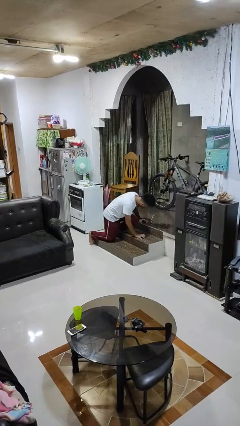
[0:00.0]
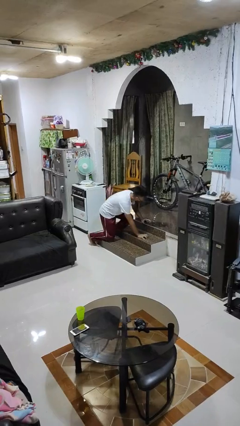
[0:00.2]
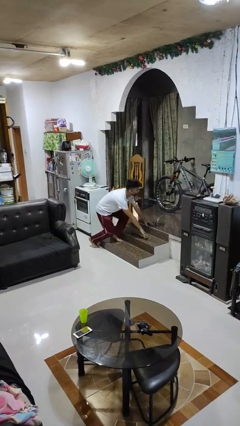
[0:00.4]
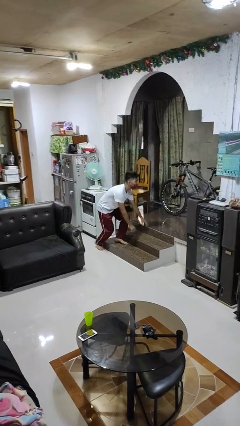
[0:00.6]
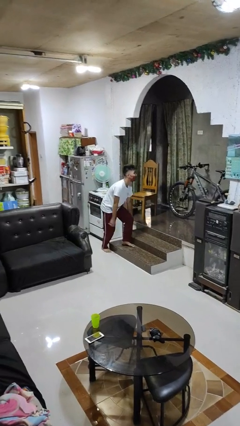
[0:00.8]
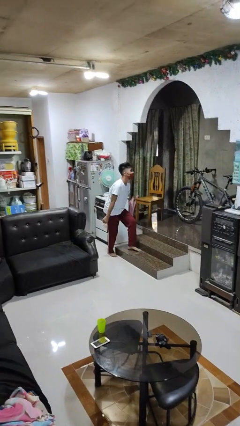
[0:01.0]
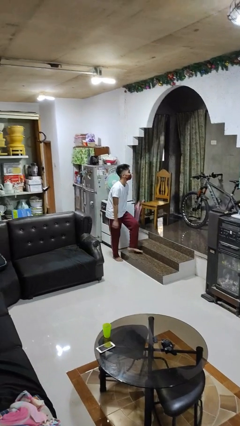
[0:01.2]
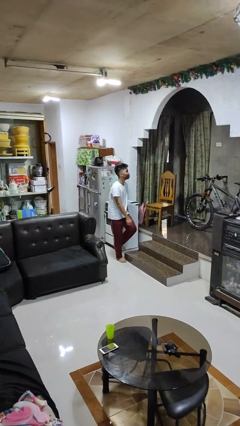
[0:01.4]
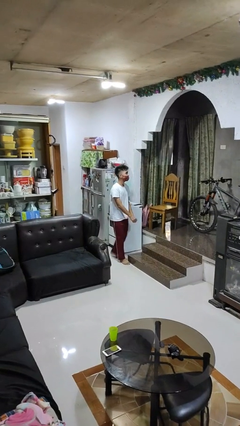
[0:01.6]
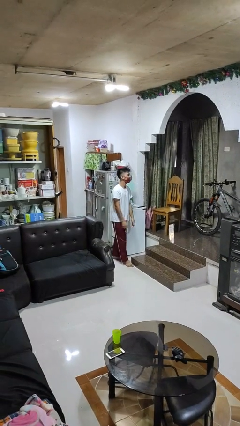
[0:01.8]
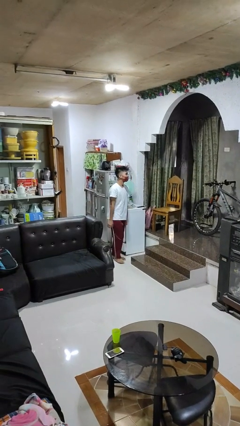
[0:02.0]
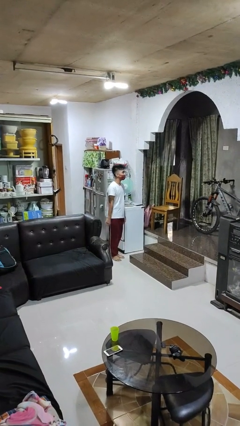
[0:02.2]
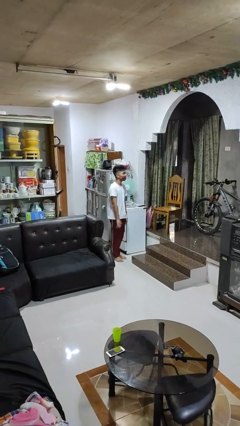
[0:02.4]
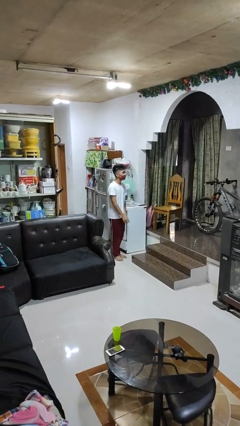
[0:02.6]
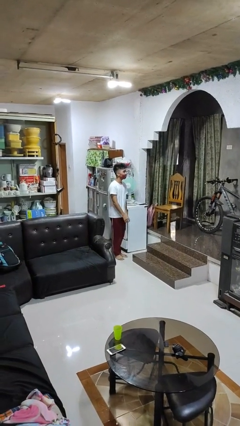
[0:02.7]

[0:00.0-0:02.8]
person stands up from floor

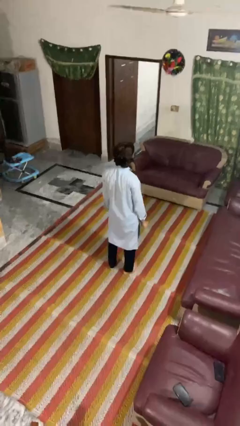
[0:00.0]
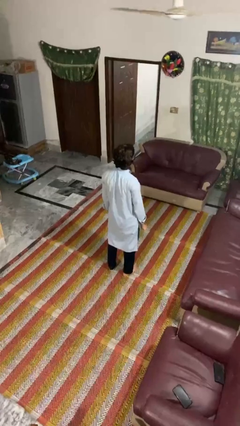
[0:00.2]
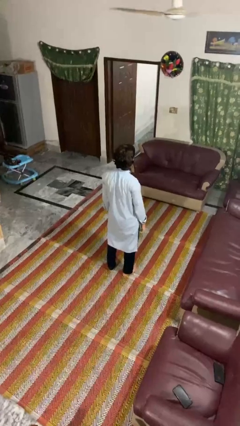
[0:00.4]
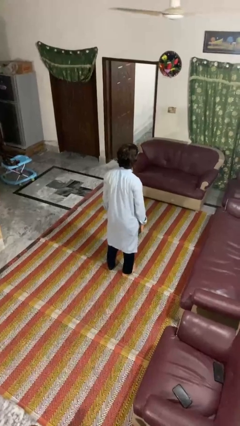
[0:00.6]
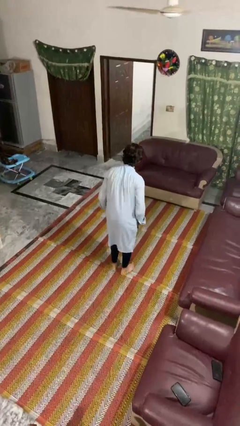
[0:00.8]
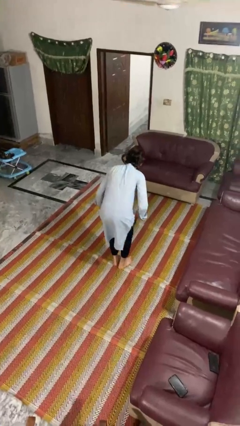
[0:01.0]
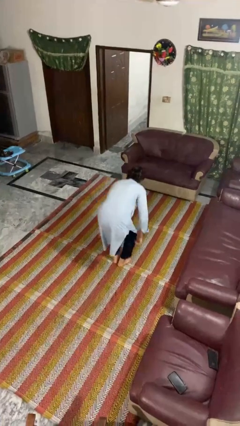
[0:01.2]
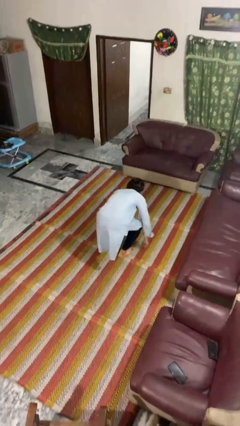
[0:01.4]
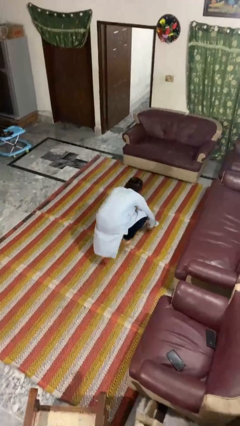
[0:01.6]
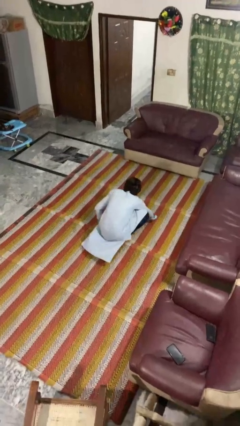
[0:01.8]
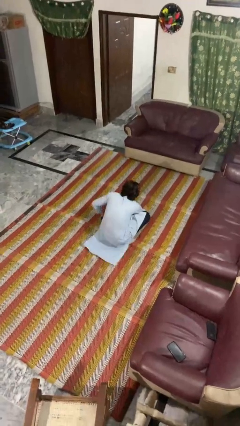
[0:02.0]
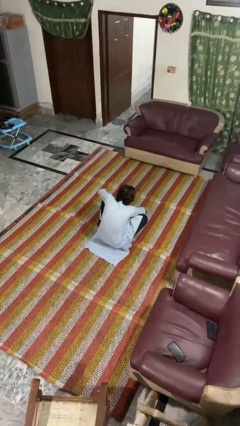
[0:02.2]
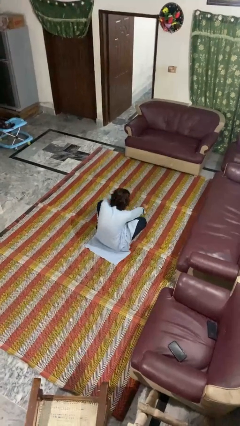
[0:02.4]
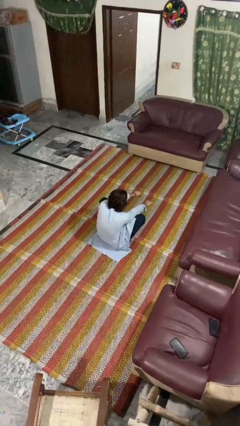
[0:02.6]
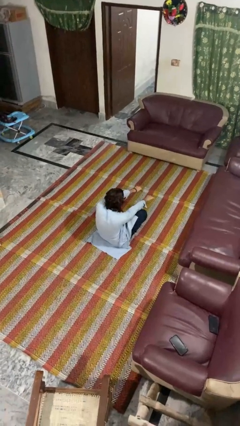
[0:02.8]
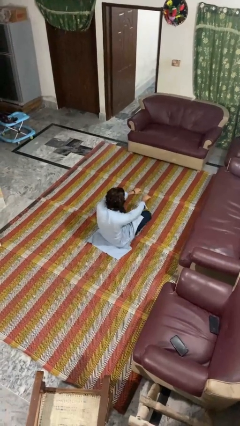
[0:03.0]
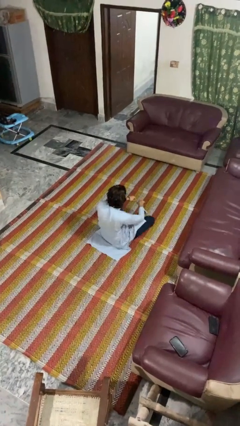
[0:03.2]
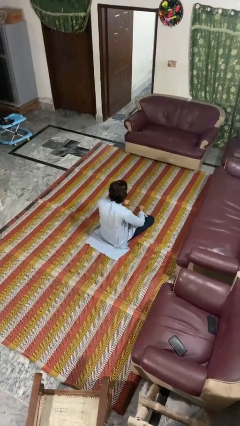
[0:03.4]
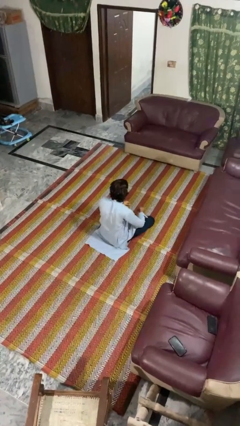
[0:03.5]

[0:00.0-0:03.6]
person sits crisscross

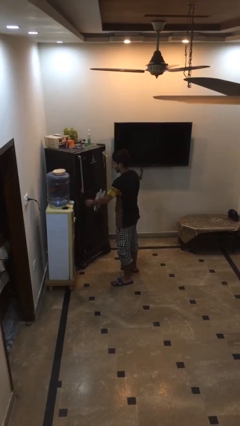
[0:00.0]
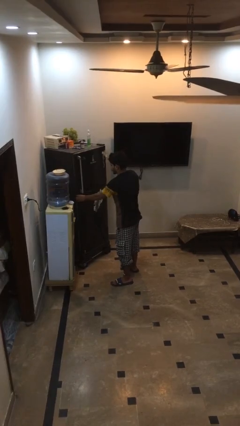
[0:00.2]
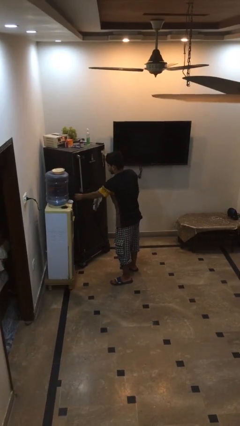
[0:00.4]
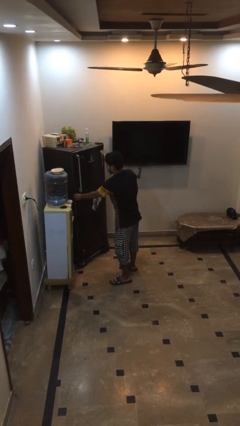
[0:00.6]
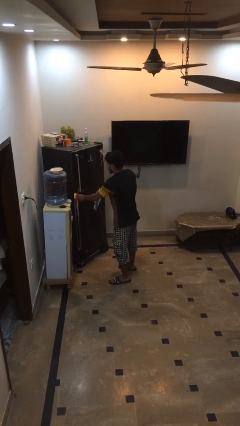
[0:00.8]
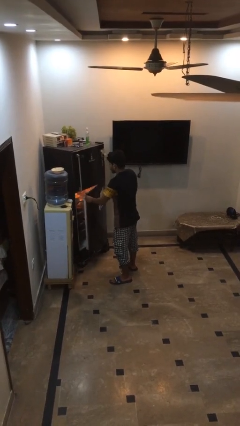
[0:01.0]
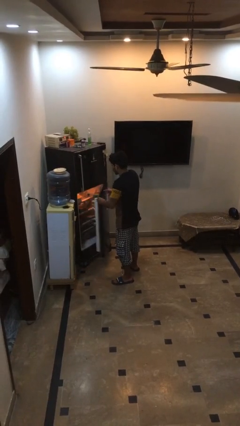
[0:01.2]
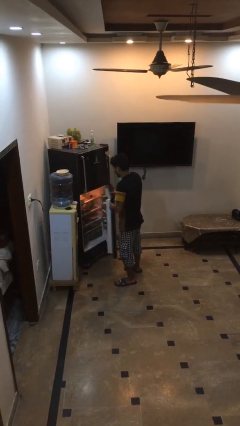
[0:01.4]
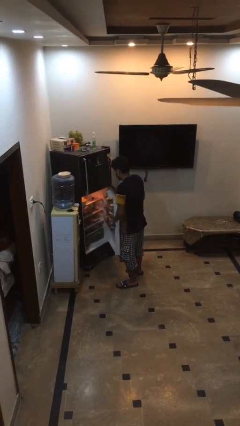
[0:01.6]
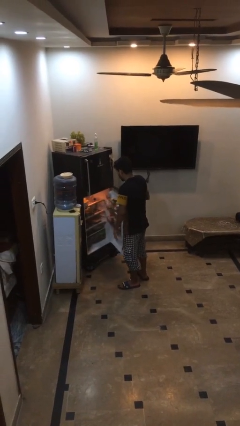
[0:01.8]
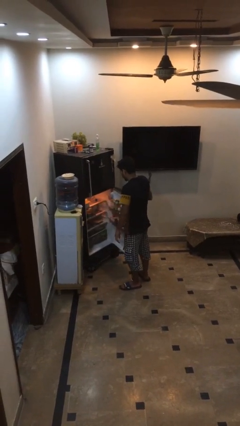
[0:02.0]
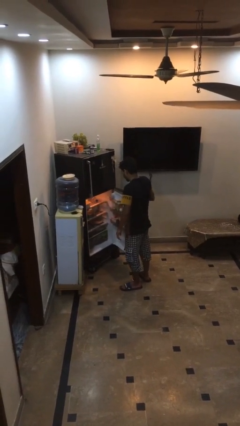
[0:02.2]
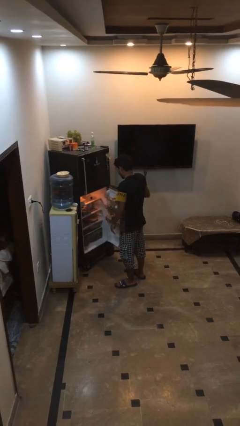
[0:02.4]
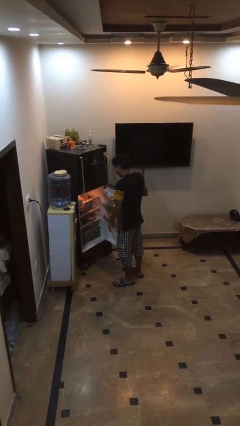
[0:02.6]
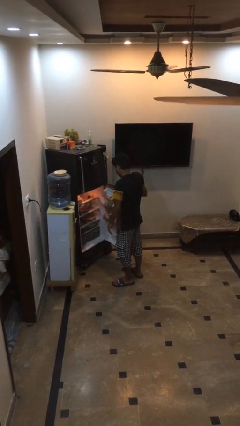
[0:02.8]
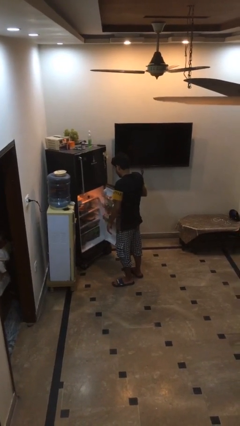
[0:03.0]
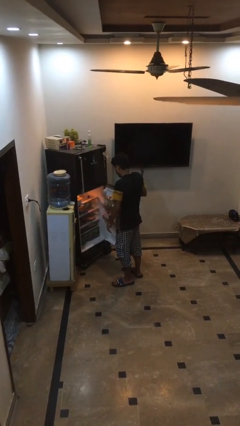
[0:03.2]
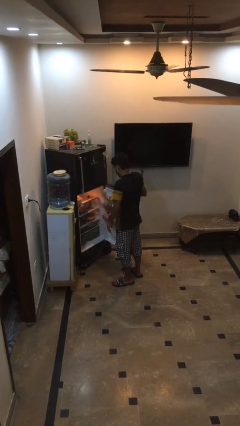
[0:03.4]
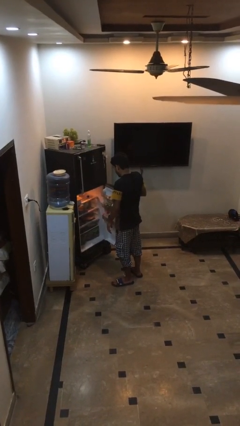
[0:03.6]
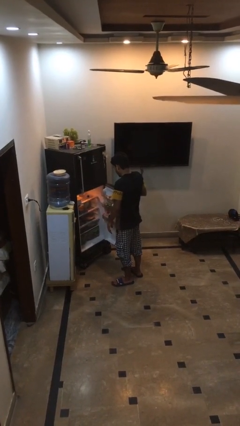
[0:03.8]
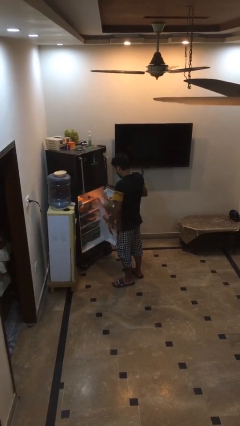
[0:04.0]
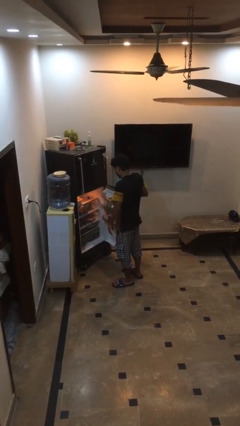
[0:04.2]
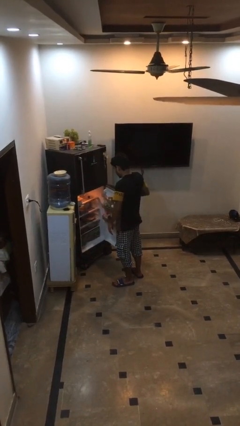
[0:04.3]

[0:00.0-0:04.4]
person opens refrigerator

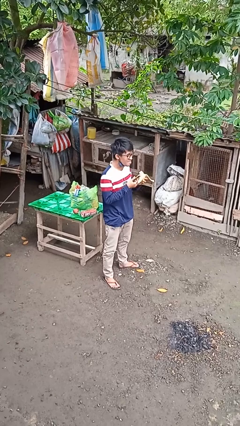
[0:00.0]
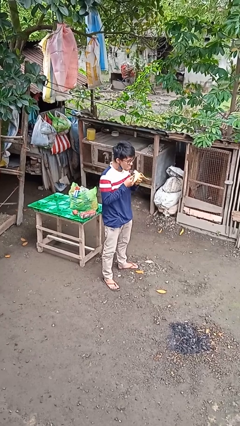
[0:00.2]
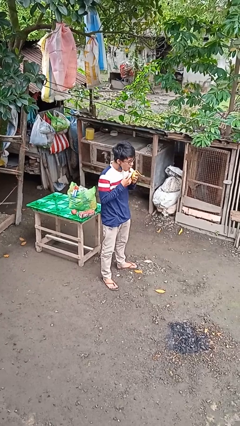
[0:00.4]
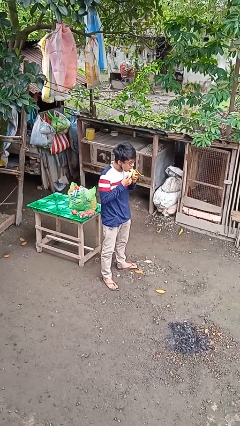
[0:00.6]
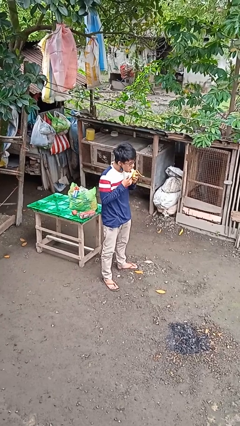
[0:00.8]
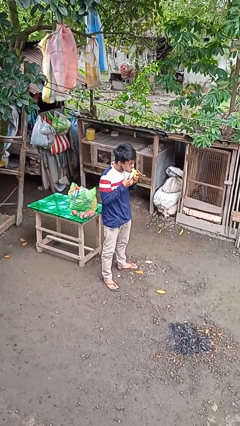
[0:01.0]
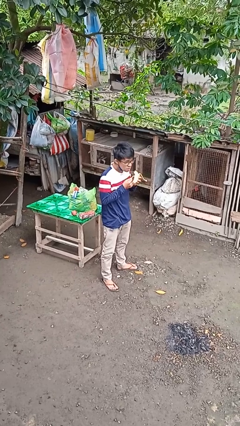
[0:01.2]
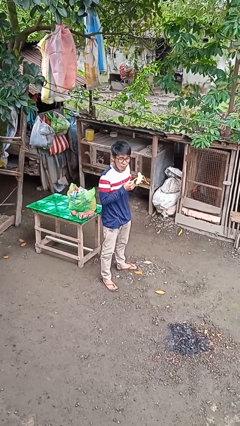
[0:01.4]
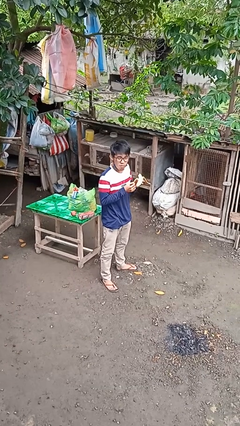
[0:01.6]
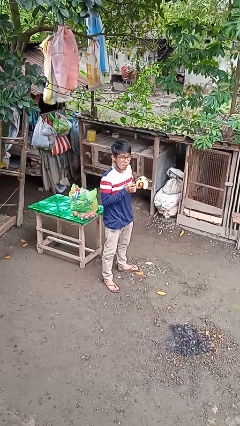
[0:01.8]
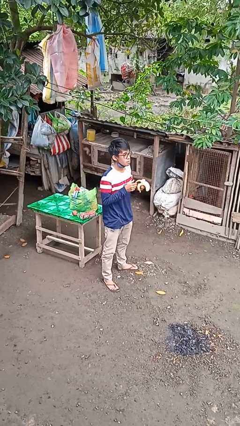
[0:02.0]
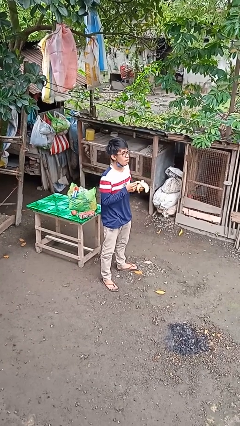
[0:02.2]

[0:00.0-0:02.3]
person eats banana

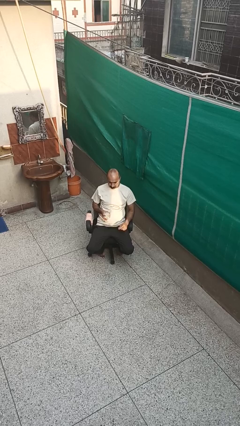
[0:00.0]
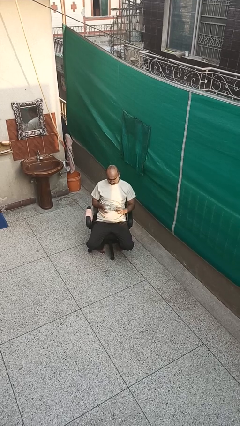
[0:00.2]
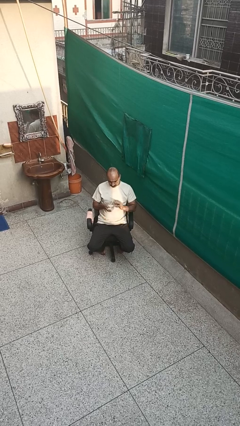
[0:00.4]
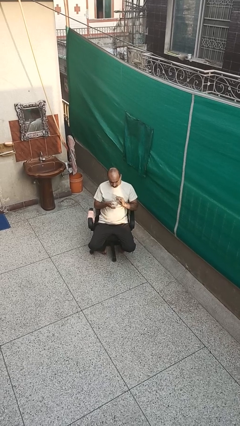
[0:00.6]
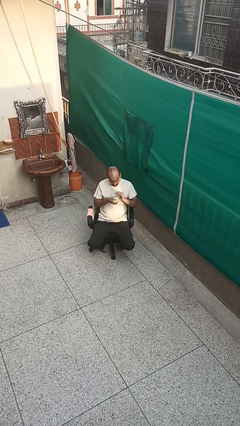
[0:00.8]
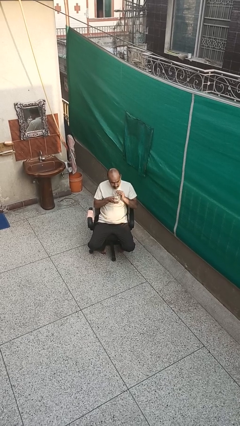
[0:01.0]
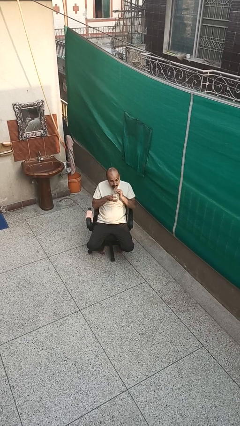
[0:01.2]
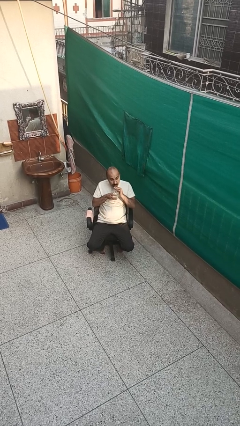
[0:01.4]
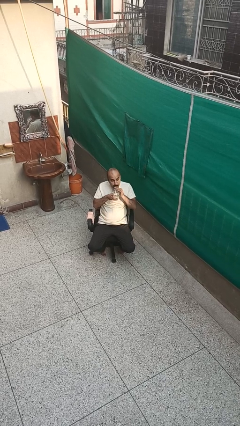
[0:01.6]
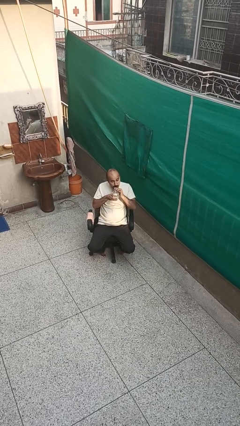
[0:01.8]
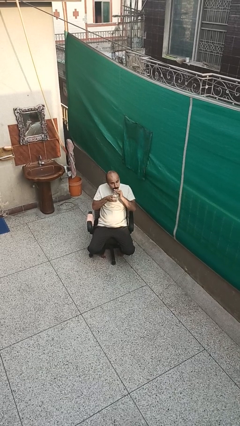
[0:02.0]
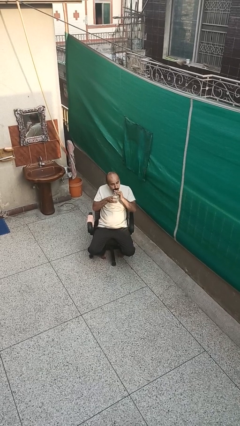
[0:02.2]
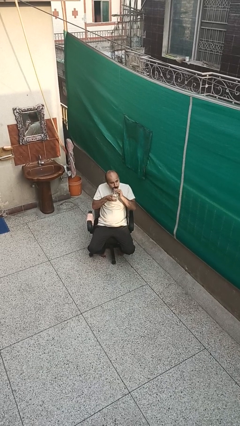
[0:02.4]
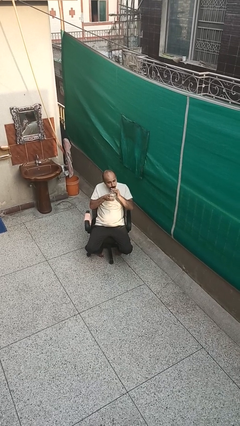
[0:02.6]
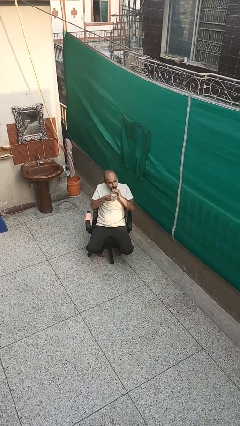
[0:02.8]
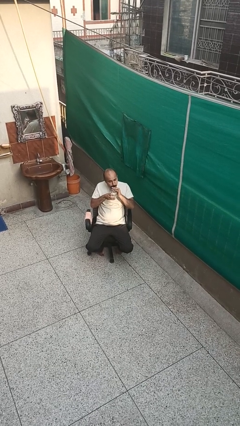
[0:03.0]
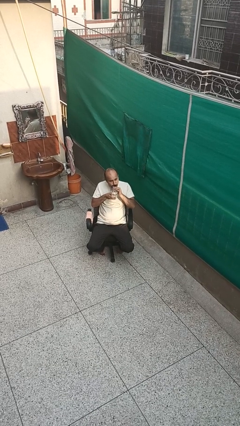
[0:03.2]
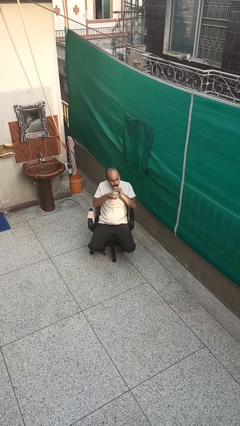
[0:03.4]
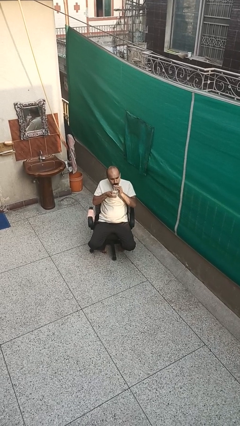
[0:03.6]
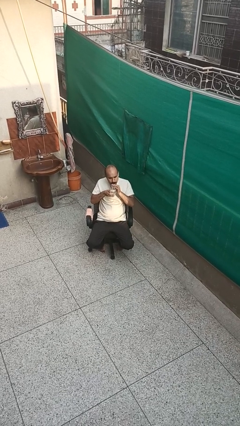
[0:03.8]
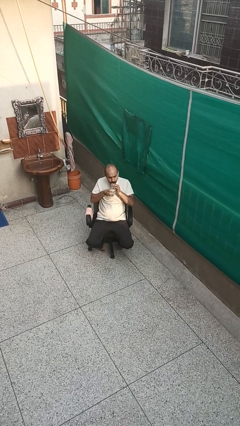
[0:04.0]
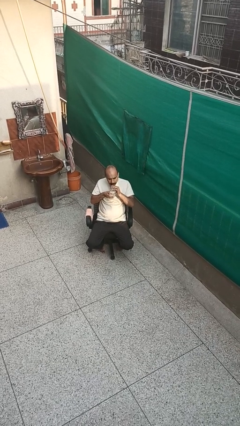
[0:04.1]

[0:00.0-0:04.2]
person drinks from straw

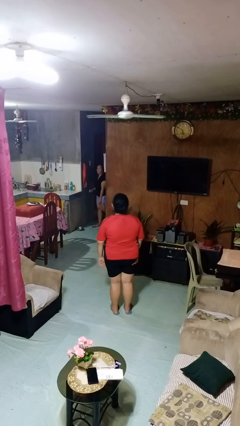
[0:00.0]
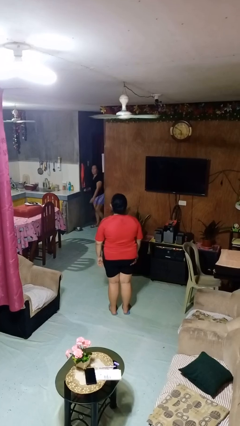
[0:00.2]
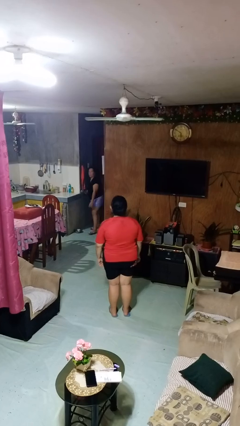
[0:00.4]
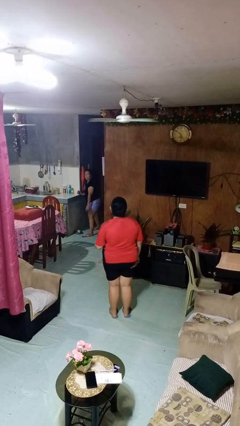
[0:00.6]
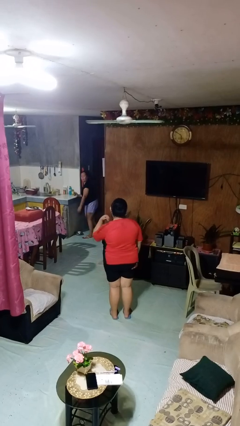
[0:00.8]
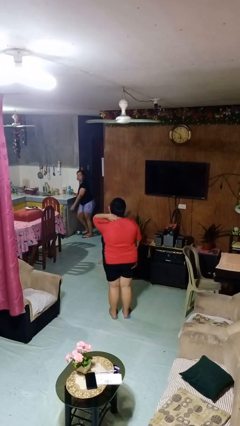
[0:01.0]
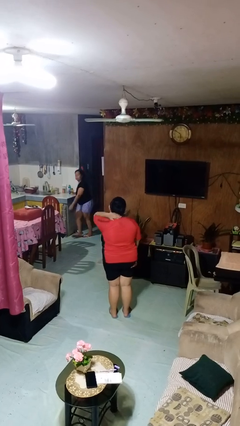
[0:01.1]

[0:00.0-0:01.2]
person rubs neck
